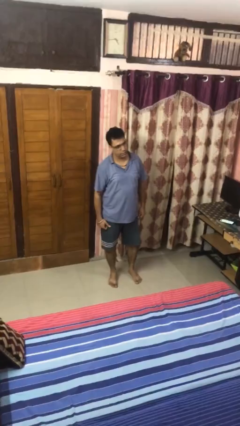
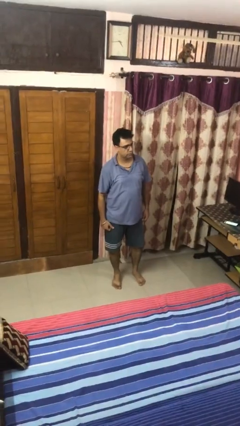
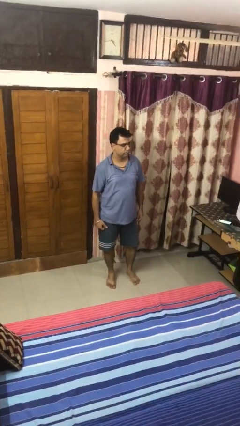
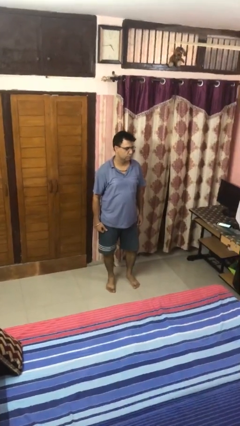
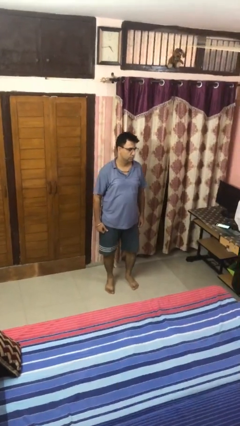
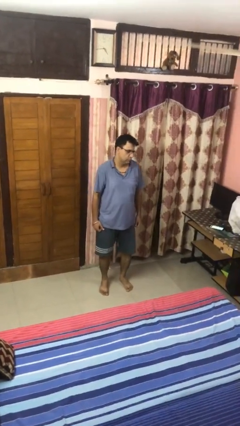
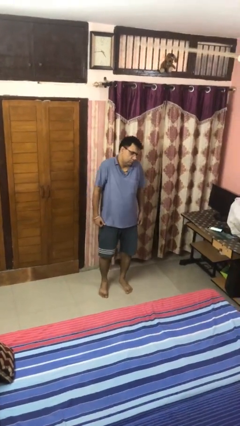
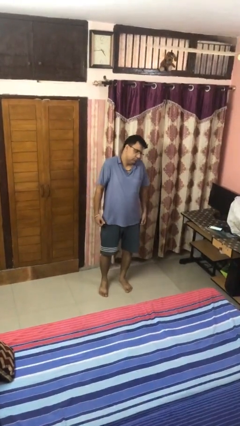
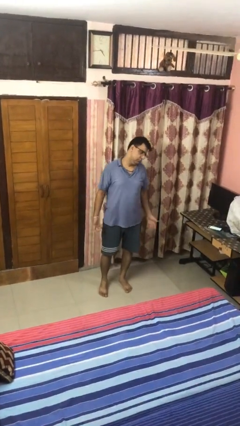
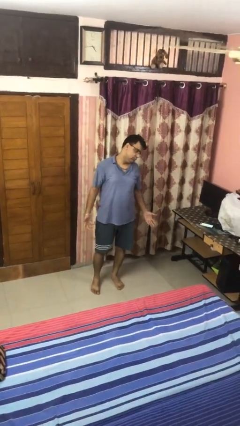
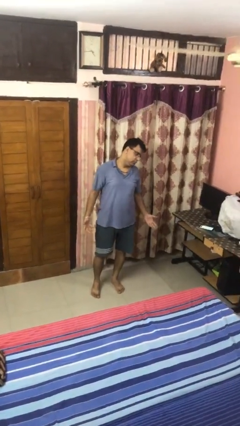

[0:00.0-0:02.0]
person shrugs

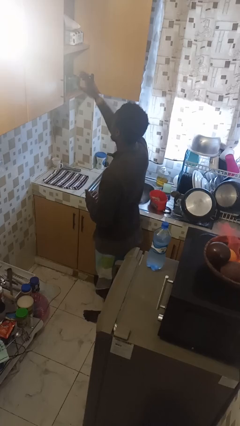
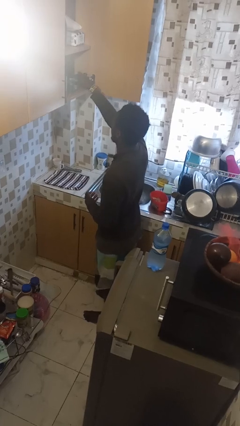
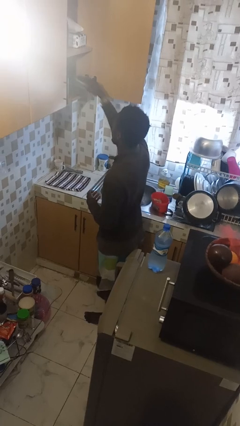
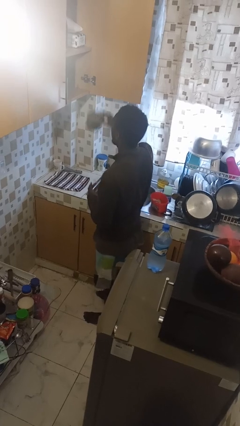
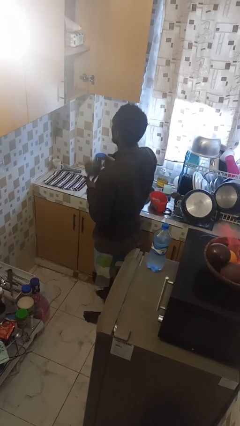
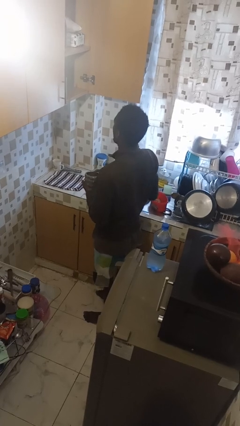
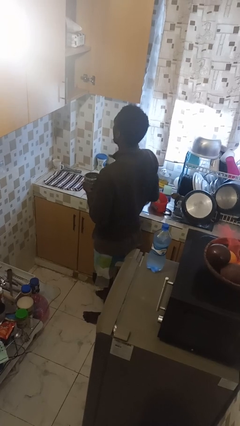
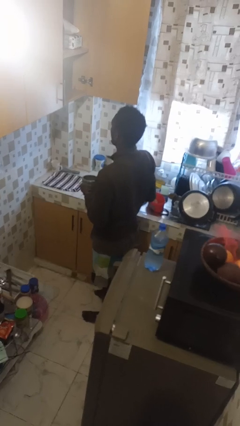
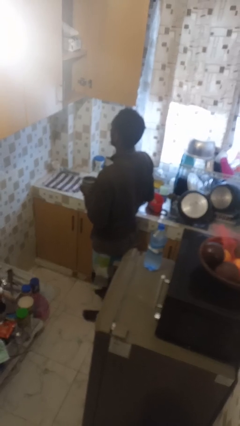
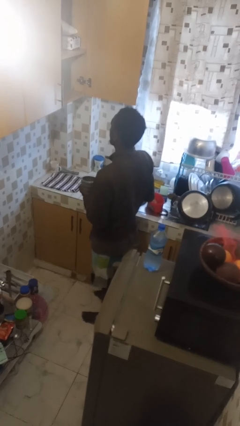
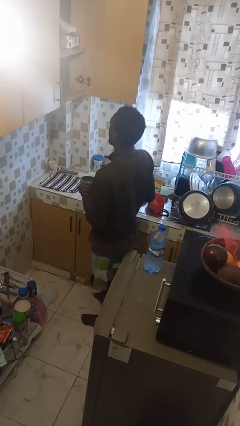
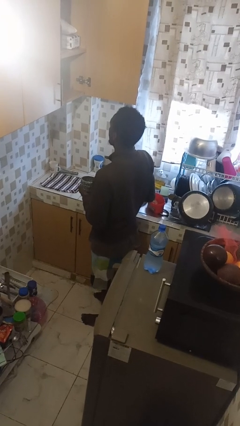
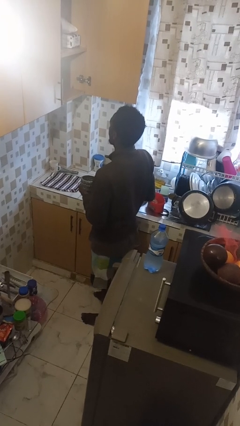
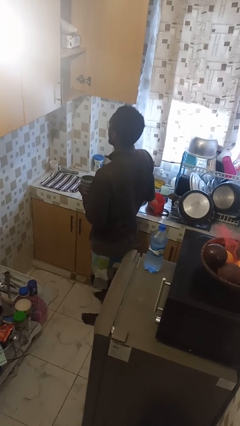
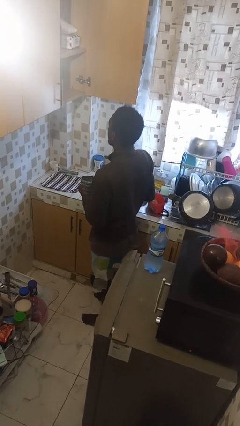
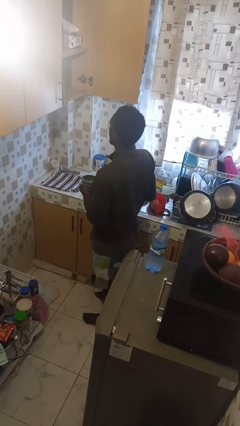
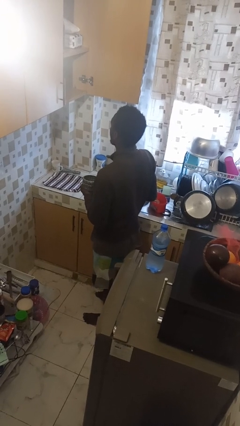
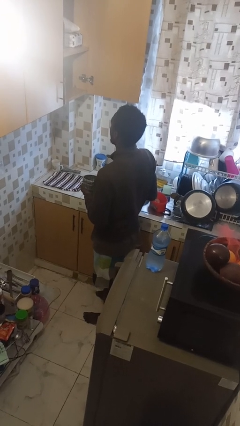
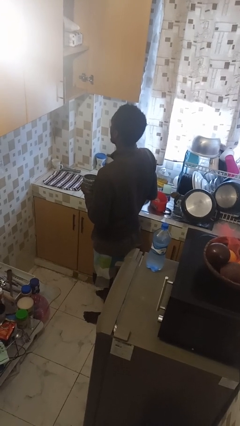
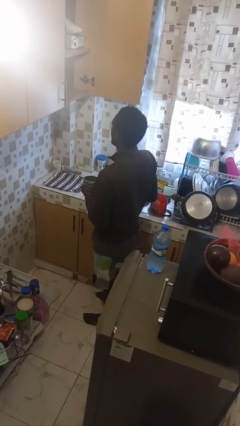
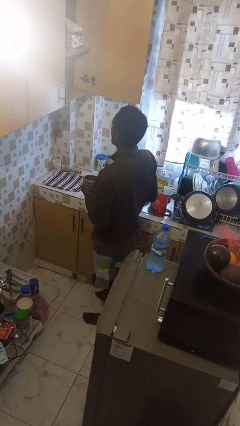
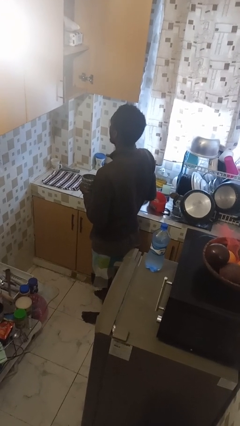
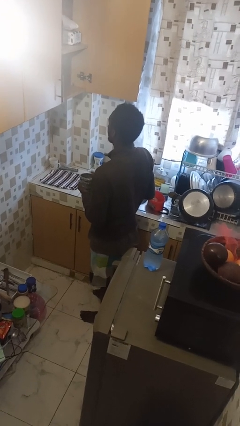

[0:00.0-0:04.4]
person picks up object from cabinet

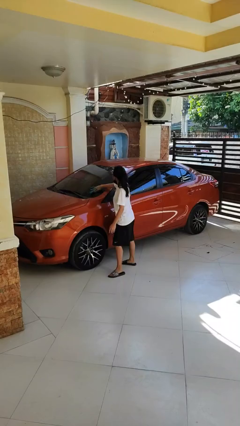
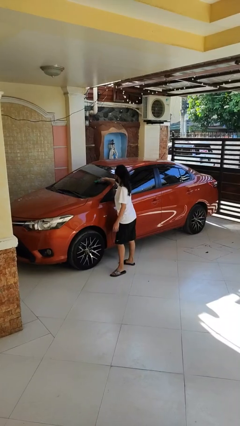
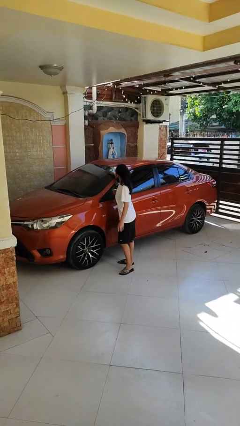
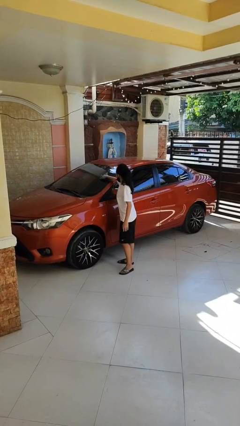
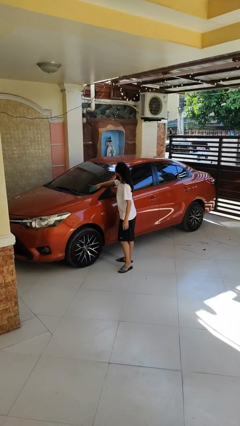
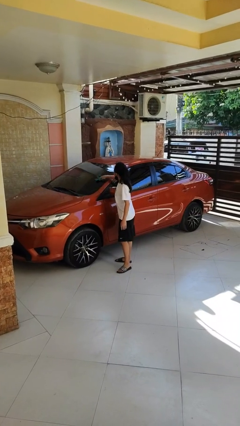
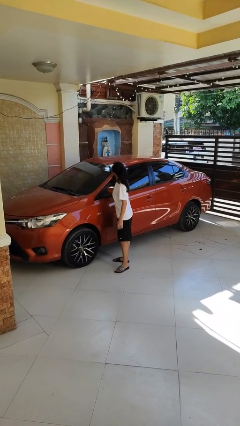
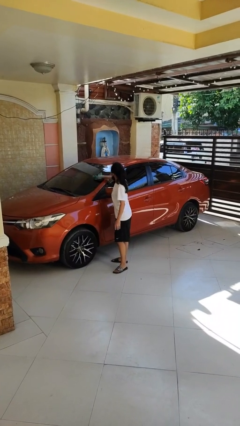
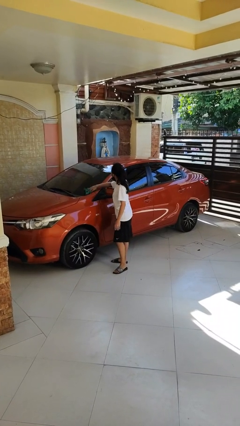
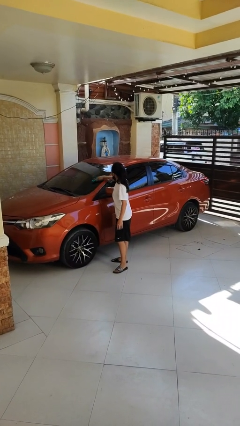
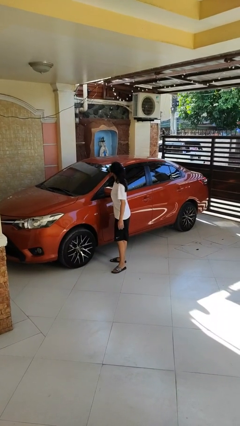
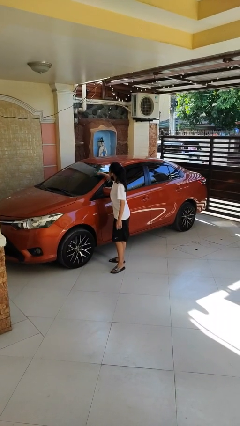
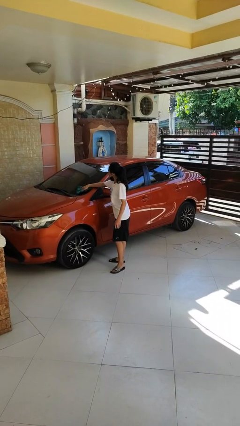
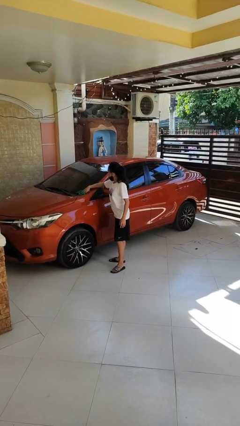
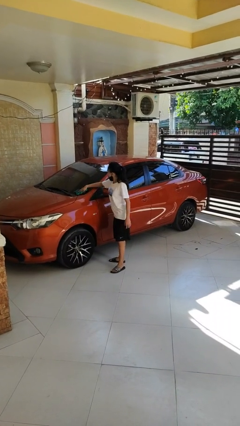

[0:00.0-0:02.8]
person polishes car with rag

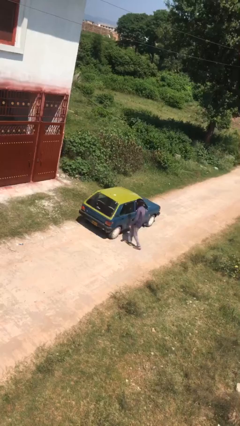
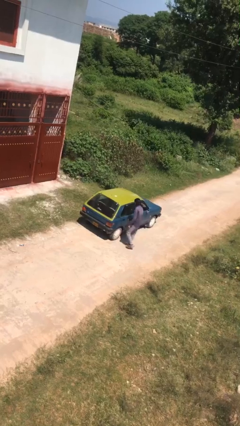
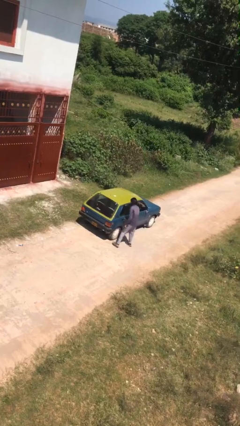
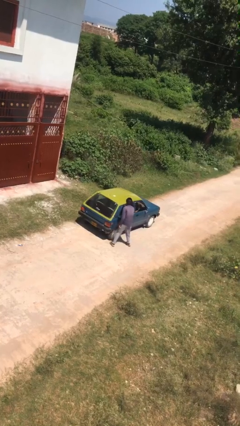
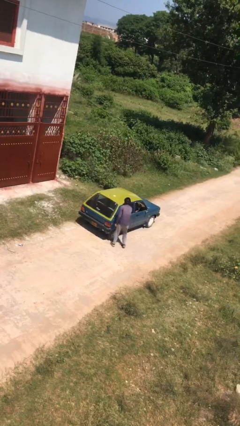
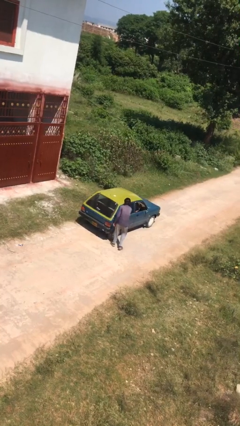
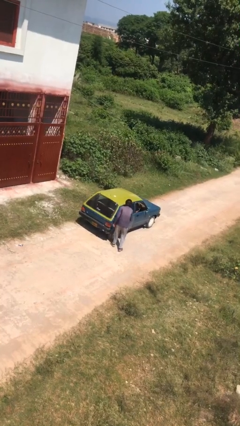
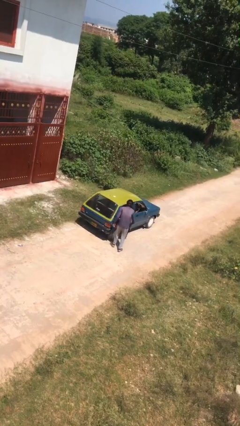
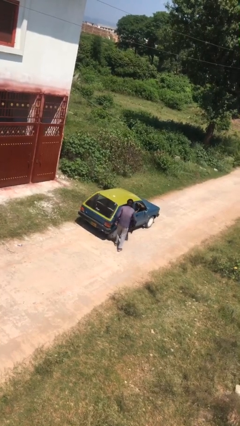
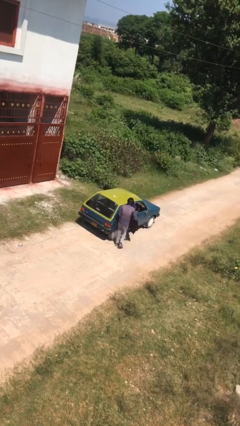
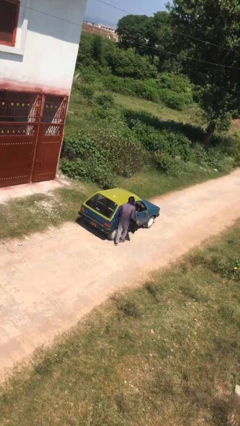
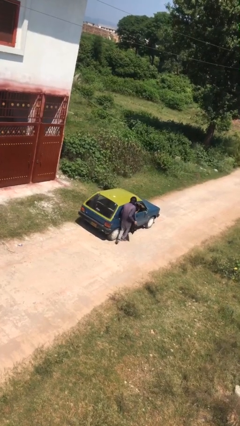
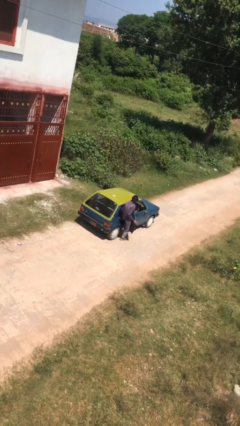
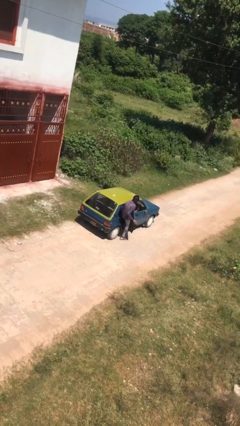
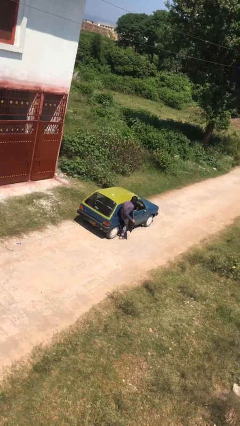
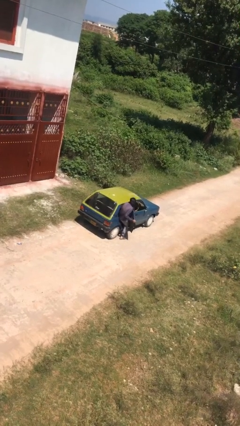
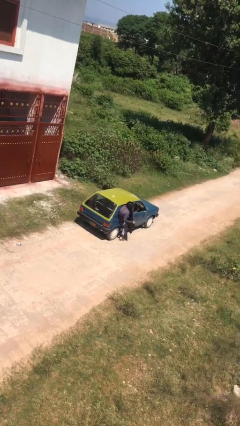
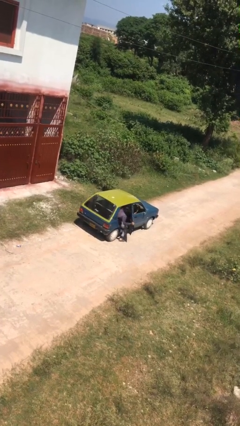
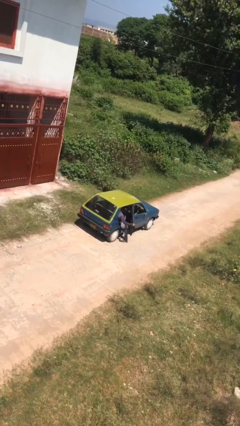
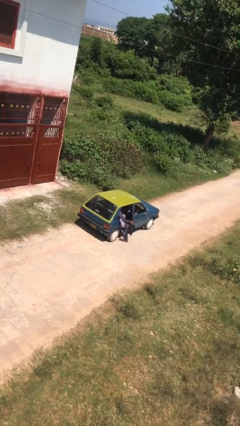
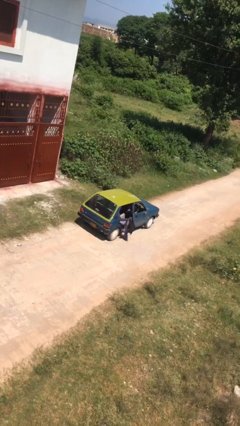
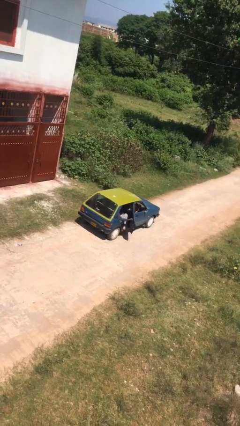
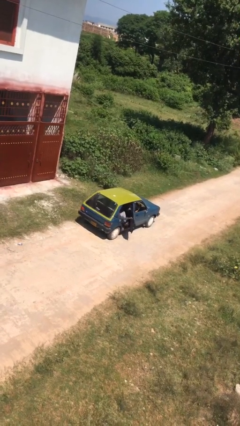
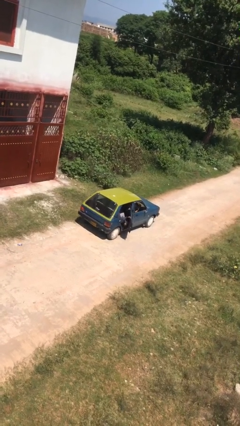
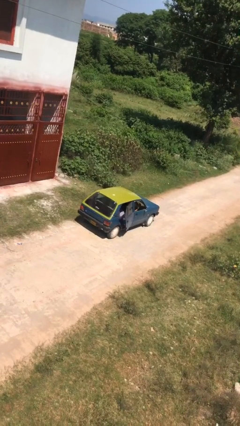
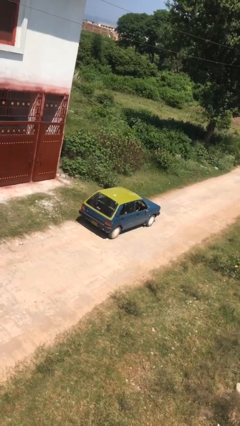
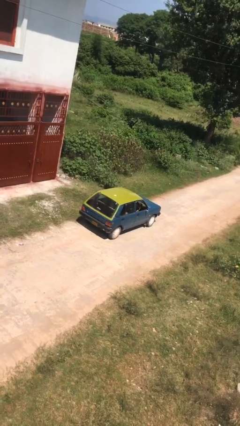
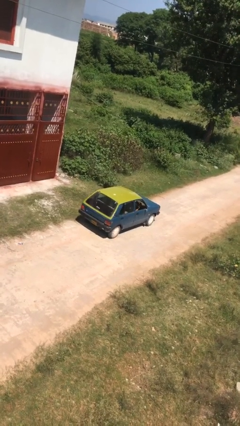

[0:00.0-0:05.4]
car picks up person

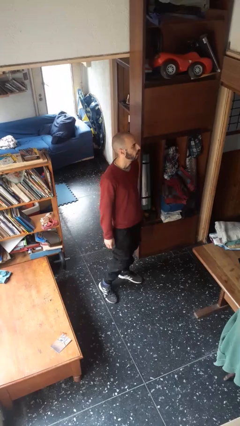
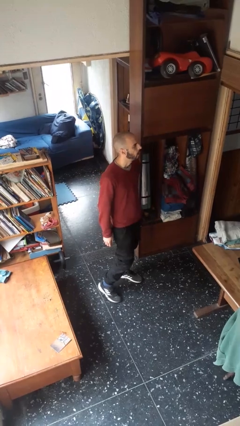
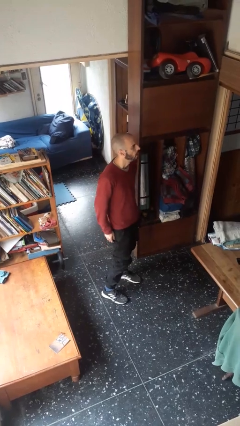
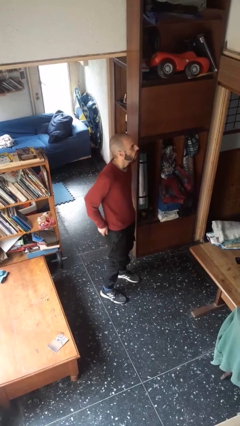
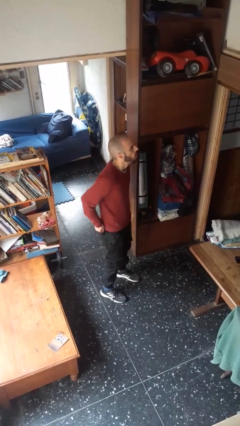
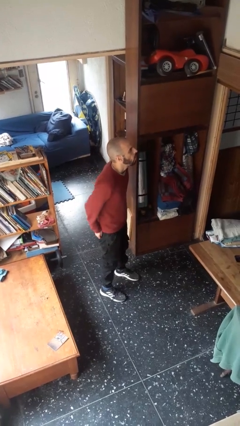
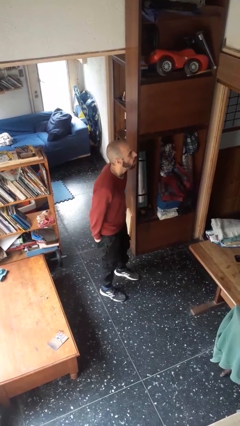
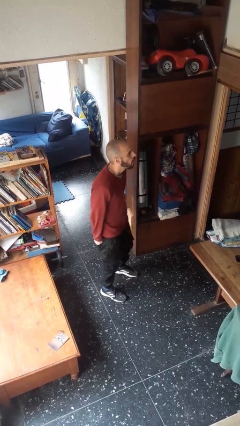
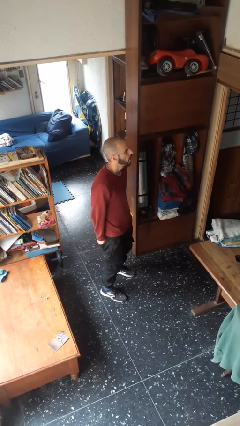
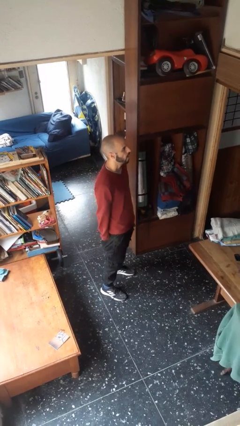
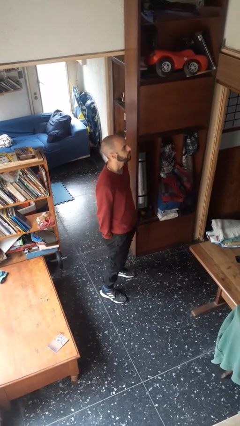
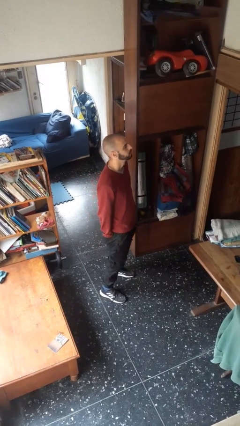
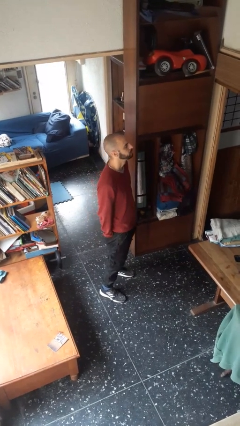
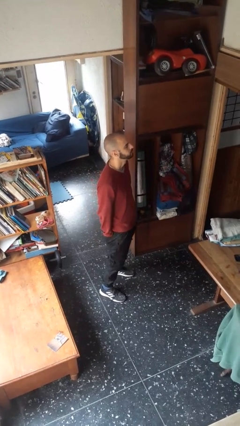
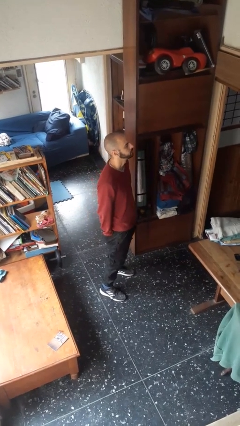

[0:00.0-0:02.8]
person puts hands in back pockets

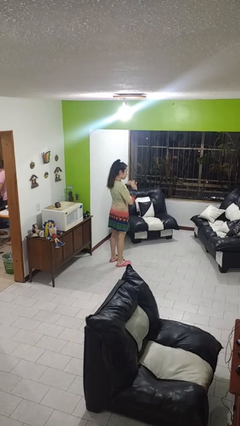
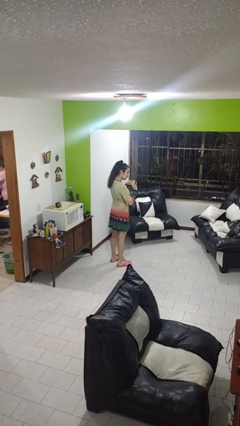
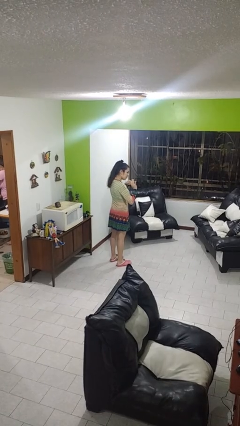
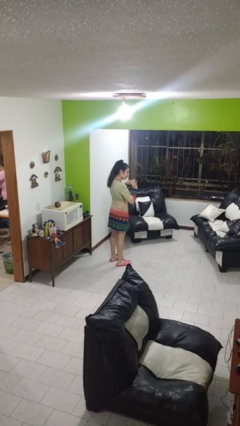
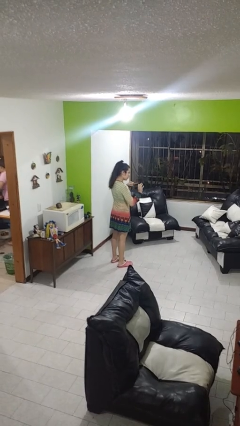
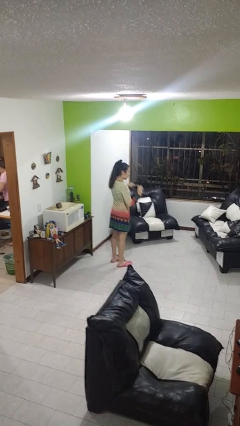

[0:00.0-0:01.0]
person files fingernails
